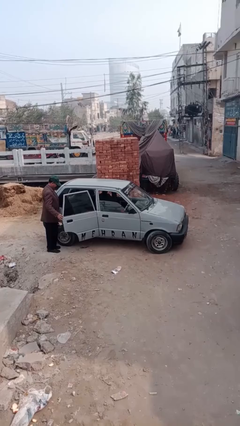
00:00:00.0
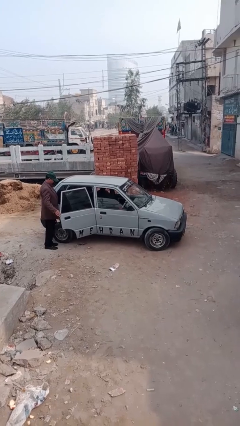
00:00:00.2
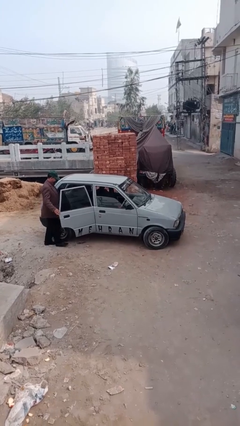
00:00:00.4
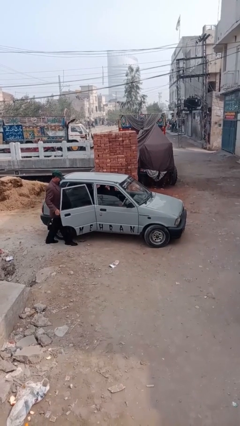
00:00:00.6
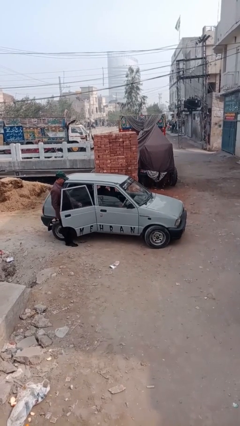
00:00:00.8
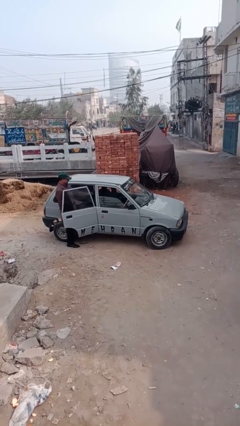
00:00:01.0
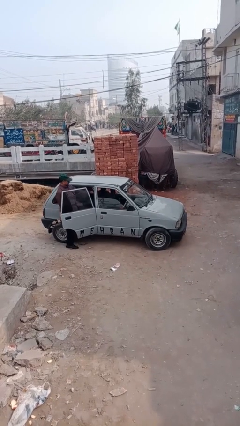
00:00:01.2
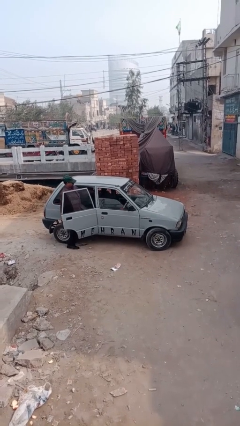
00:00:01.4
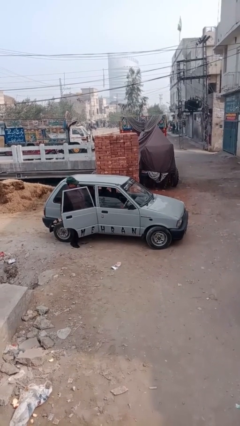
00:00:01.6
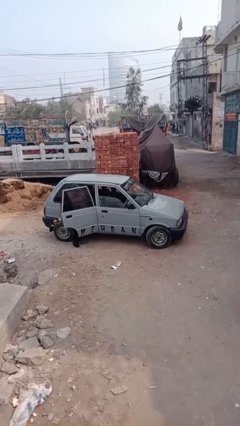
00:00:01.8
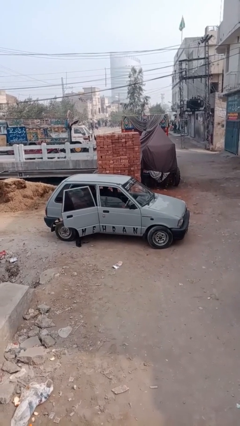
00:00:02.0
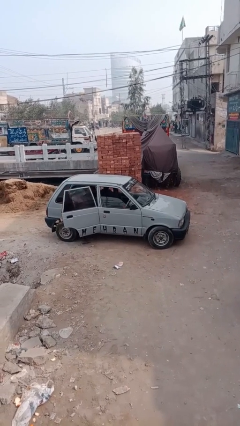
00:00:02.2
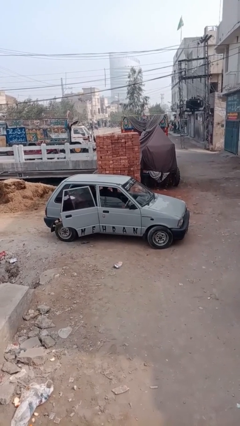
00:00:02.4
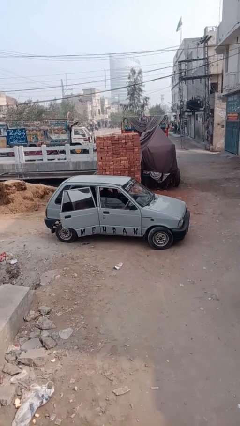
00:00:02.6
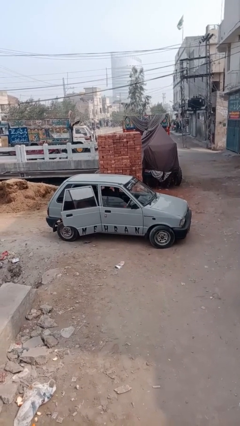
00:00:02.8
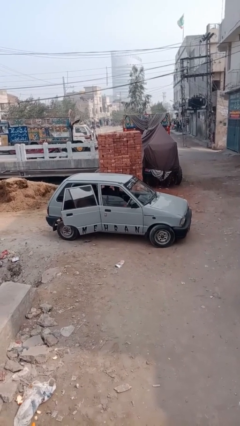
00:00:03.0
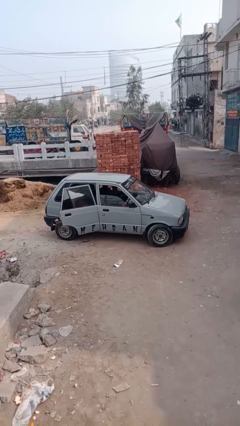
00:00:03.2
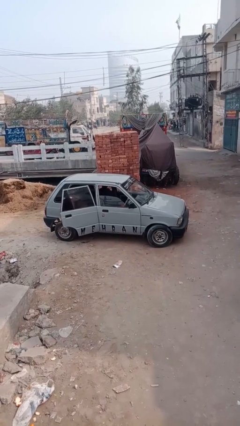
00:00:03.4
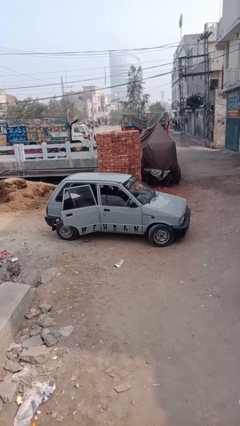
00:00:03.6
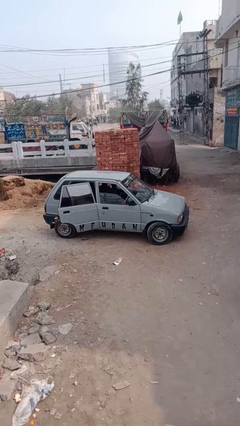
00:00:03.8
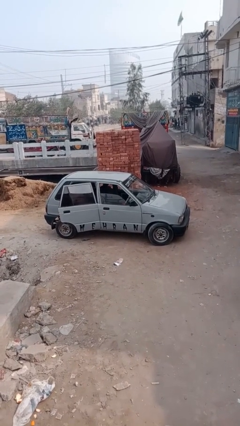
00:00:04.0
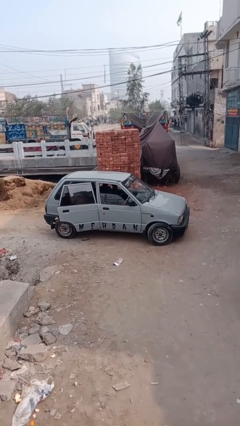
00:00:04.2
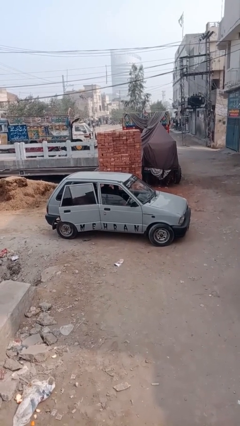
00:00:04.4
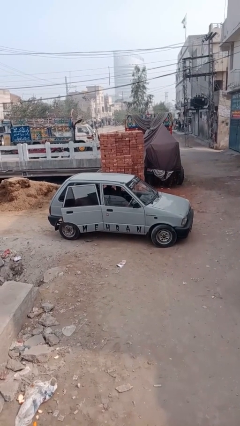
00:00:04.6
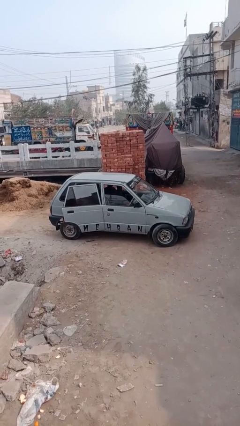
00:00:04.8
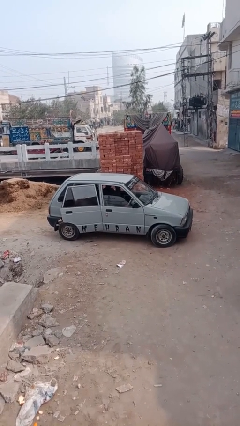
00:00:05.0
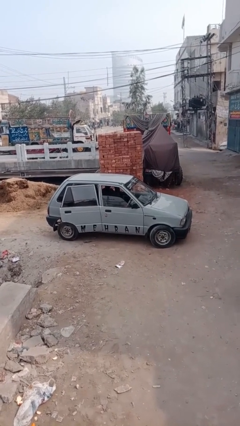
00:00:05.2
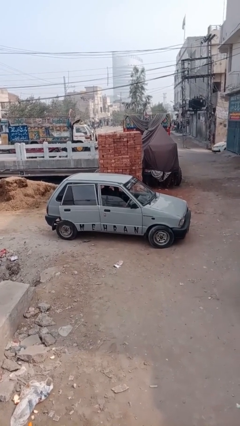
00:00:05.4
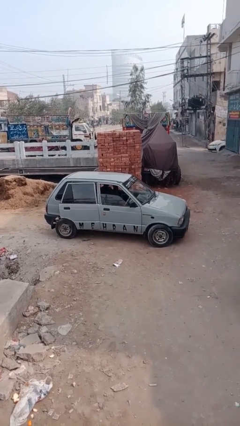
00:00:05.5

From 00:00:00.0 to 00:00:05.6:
car picks up person

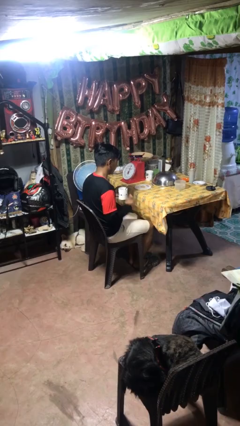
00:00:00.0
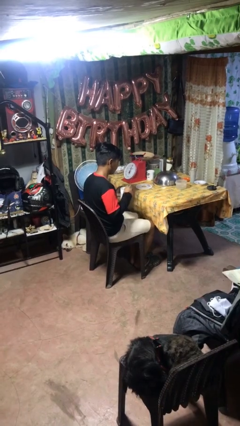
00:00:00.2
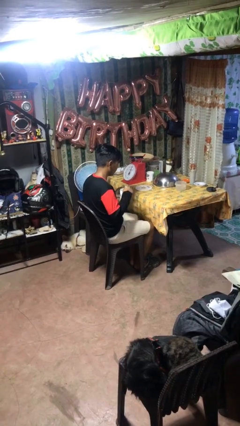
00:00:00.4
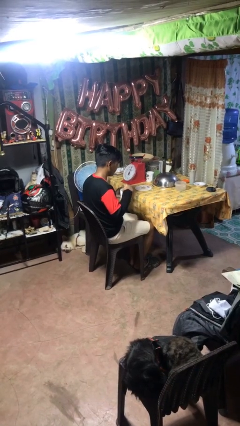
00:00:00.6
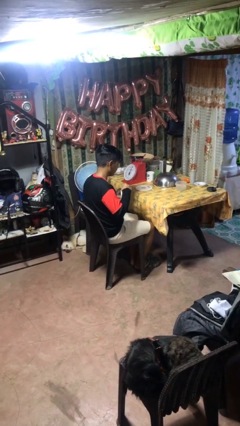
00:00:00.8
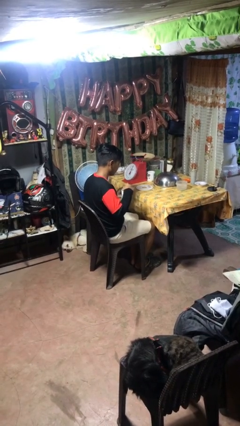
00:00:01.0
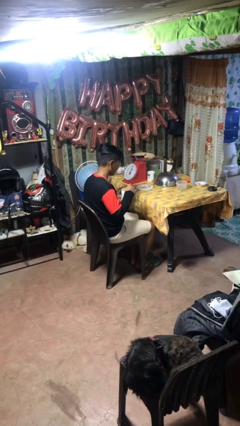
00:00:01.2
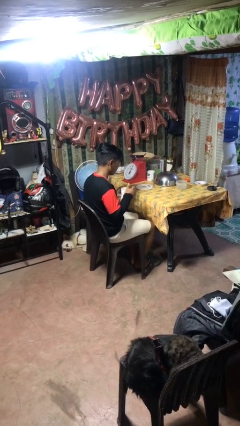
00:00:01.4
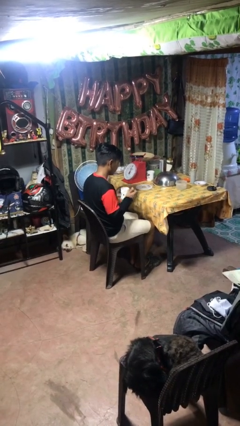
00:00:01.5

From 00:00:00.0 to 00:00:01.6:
person stirs mug

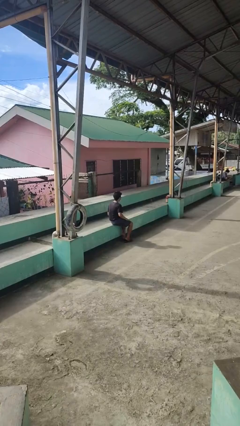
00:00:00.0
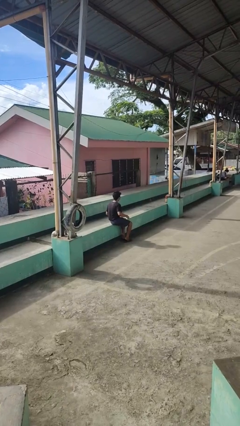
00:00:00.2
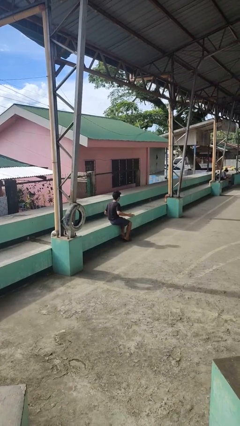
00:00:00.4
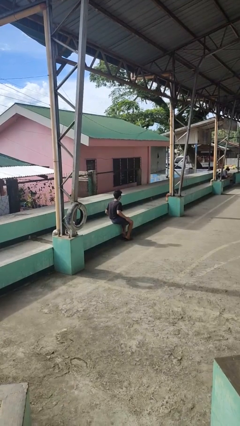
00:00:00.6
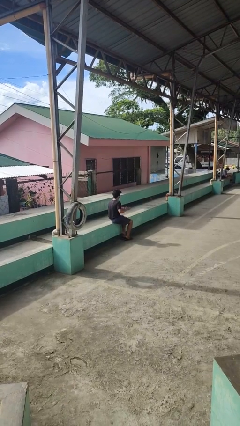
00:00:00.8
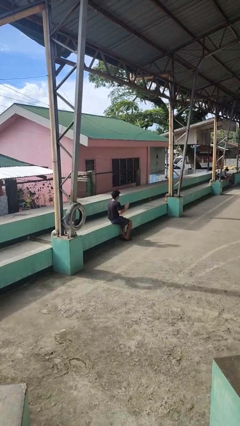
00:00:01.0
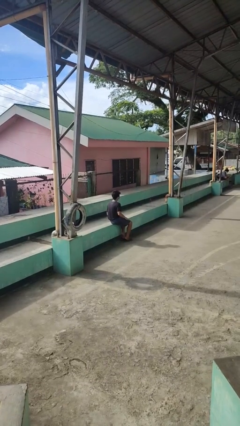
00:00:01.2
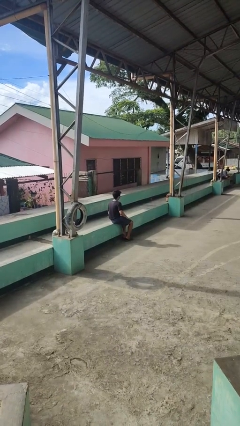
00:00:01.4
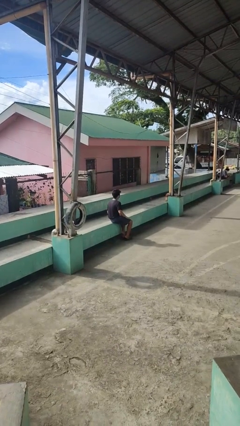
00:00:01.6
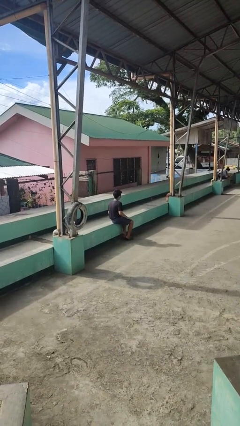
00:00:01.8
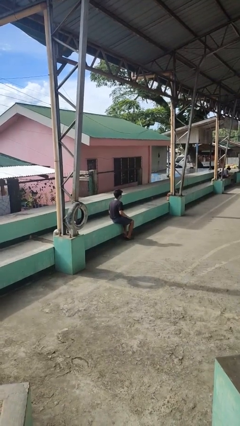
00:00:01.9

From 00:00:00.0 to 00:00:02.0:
person slaps hands on thighs

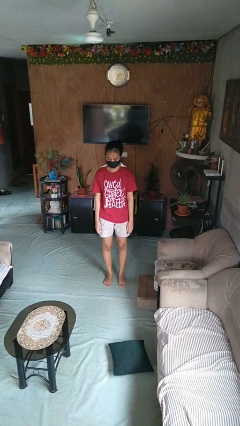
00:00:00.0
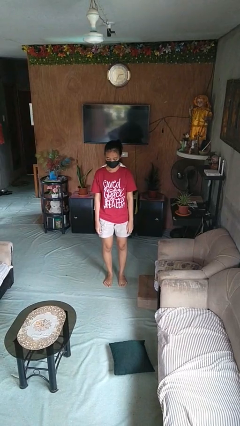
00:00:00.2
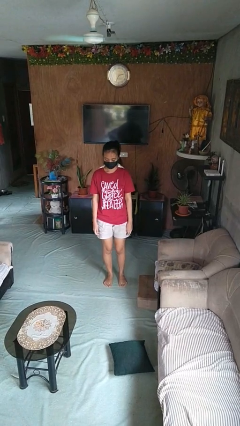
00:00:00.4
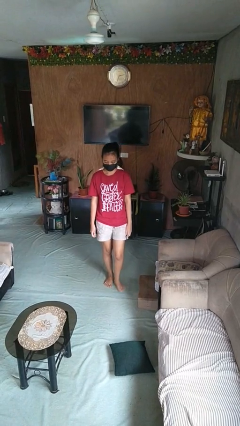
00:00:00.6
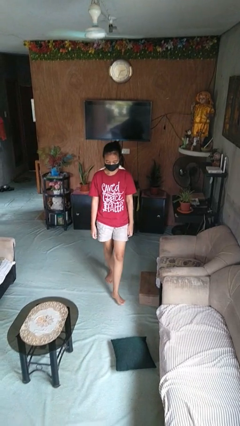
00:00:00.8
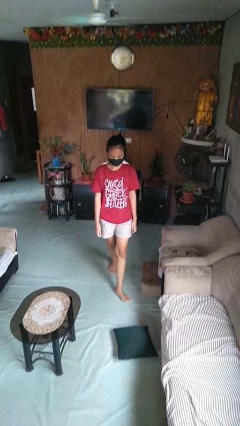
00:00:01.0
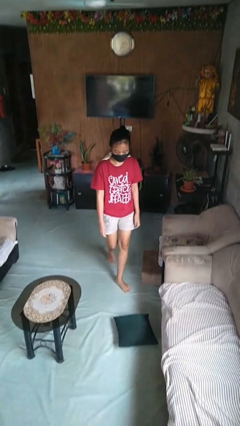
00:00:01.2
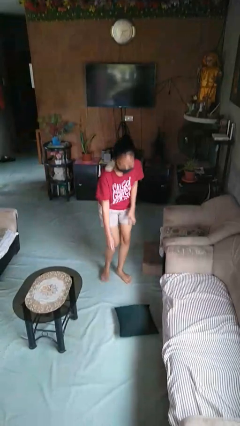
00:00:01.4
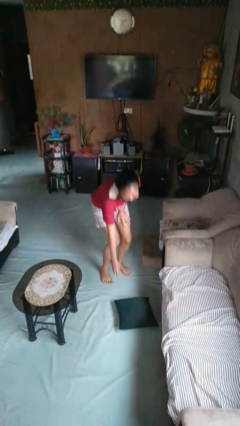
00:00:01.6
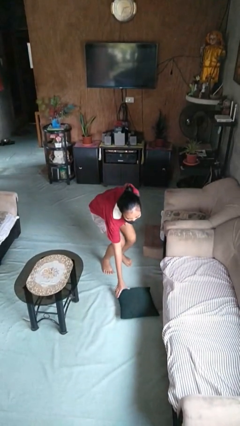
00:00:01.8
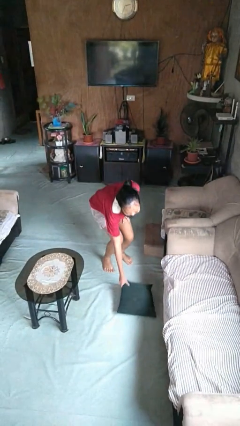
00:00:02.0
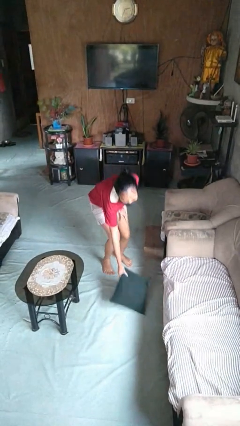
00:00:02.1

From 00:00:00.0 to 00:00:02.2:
person picks up object from floor

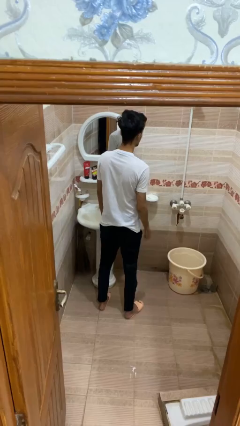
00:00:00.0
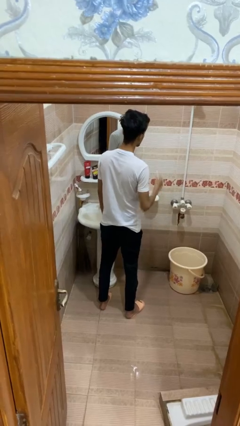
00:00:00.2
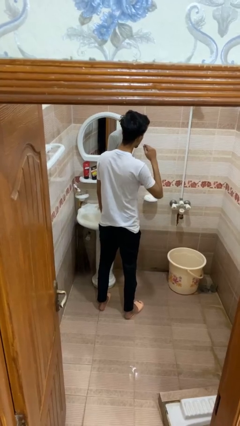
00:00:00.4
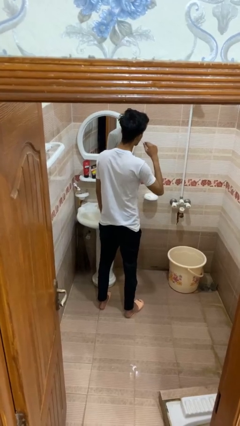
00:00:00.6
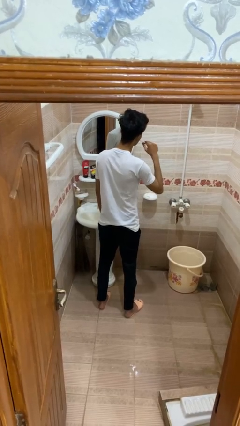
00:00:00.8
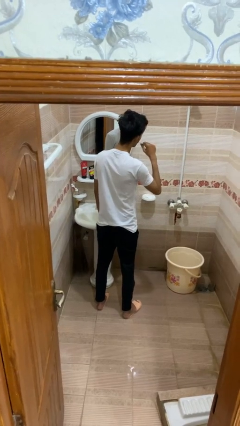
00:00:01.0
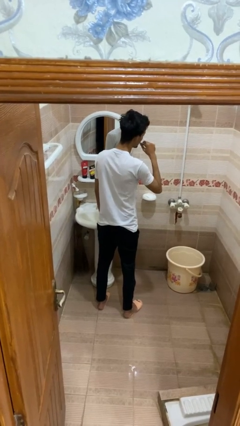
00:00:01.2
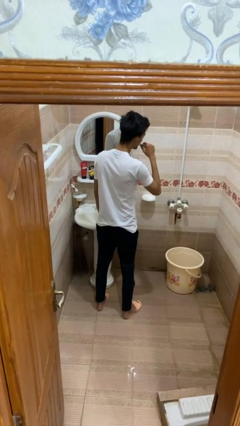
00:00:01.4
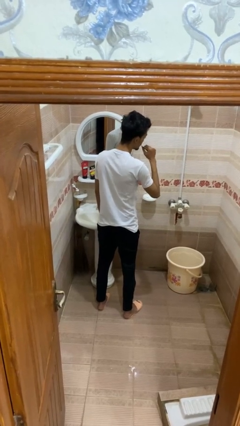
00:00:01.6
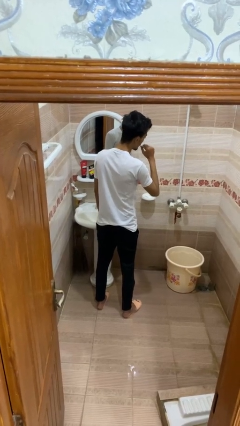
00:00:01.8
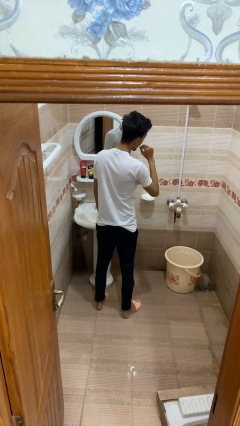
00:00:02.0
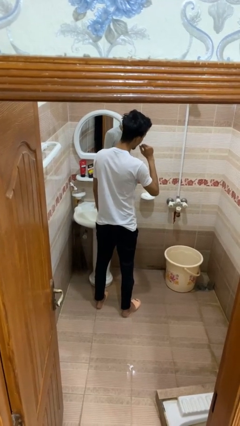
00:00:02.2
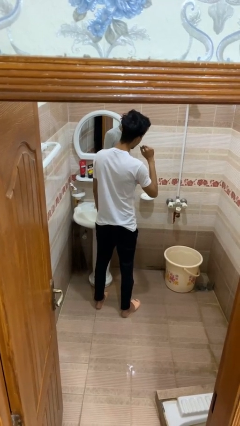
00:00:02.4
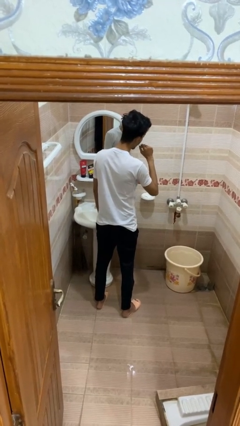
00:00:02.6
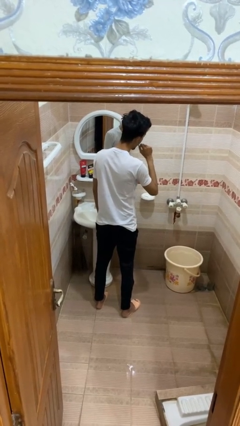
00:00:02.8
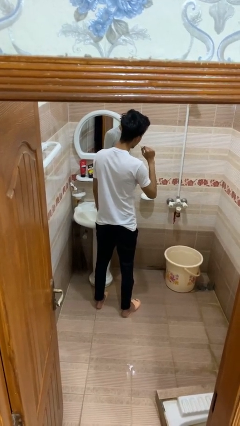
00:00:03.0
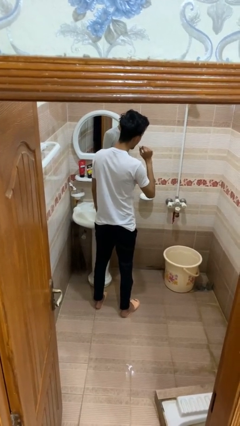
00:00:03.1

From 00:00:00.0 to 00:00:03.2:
person brushes teeth

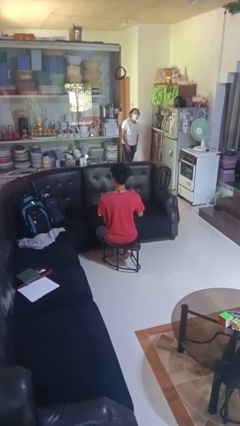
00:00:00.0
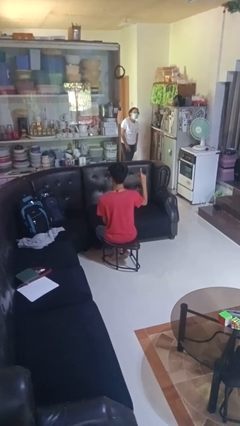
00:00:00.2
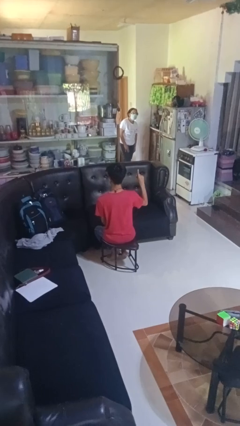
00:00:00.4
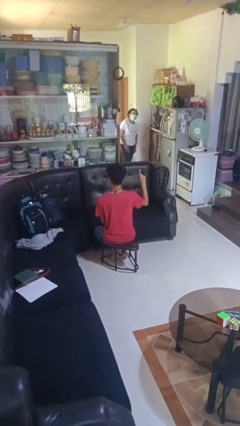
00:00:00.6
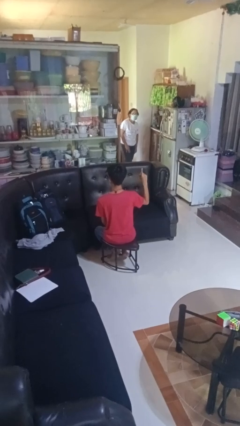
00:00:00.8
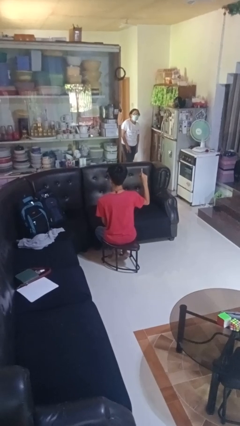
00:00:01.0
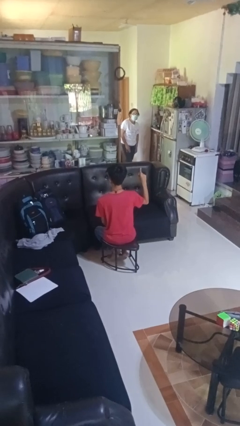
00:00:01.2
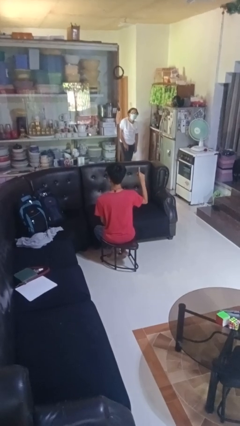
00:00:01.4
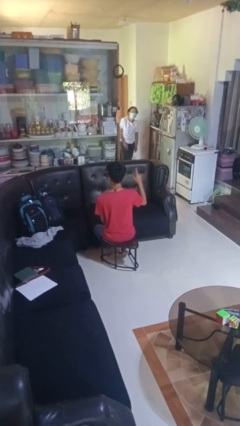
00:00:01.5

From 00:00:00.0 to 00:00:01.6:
person gestures number one

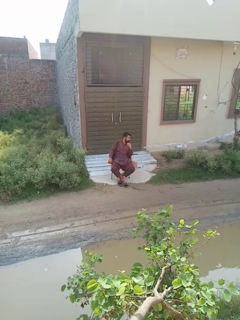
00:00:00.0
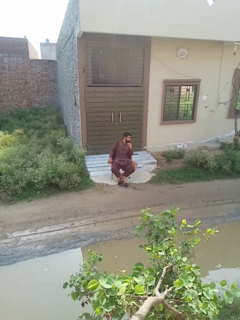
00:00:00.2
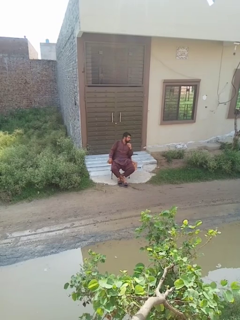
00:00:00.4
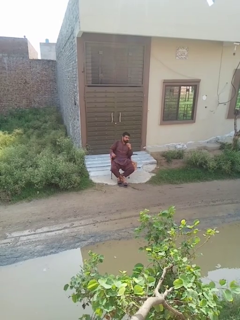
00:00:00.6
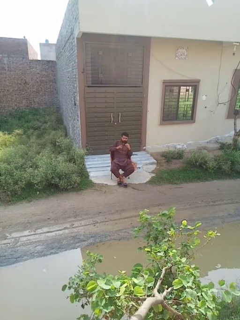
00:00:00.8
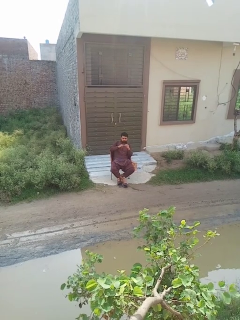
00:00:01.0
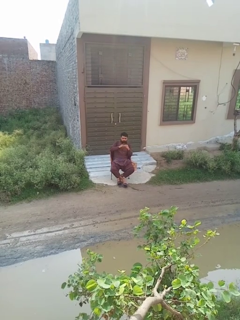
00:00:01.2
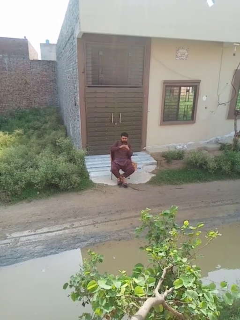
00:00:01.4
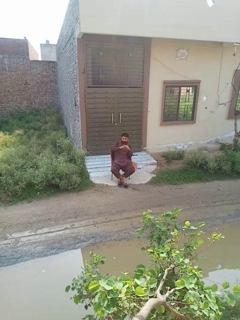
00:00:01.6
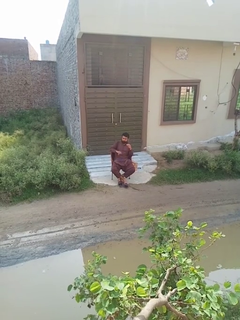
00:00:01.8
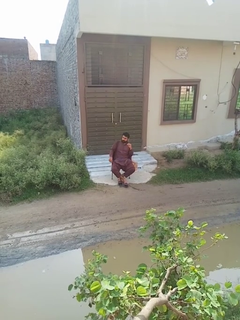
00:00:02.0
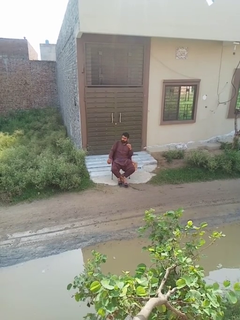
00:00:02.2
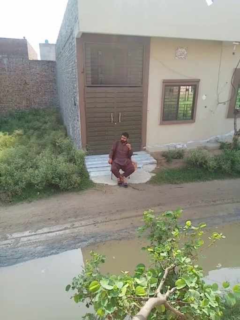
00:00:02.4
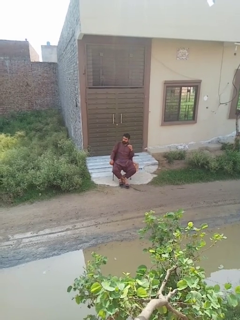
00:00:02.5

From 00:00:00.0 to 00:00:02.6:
person puts on ring
